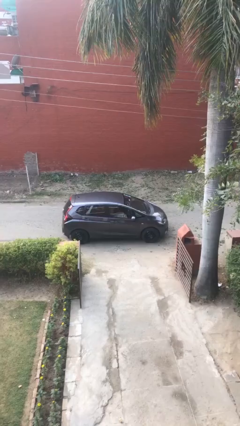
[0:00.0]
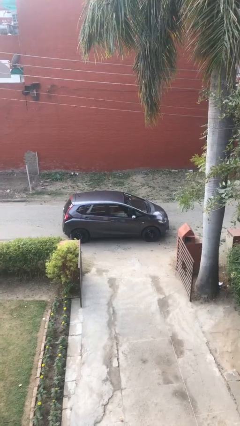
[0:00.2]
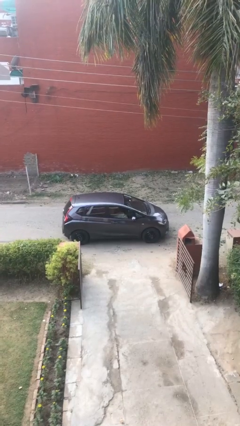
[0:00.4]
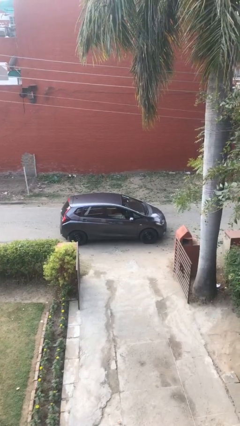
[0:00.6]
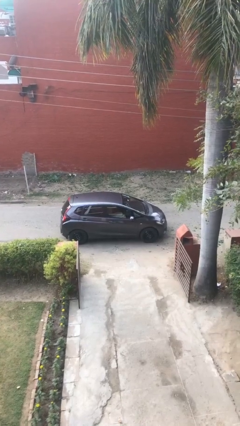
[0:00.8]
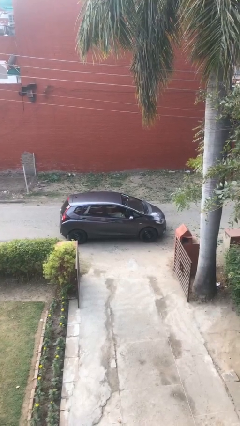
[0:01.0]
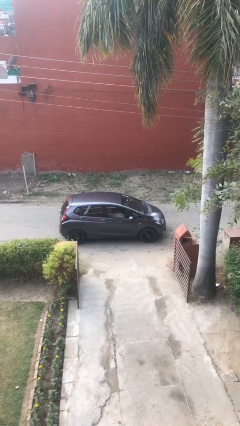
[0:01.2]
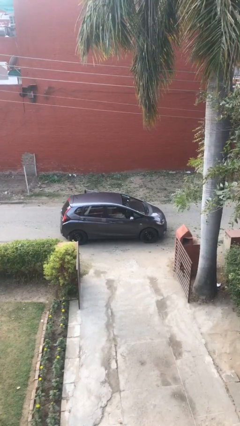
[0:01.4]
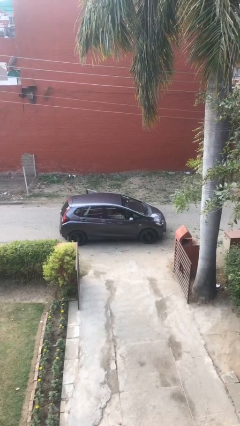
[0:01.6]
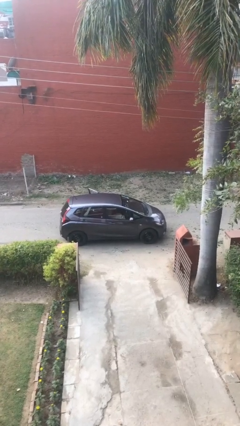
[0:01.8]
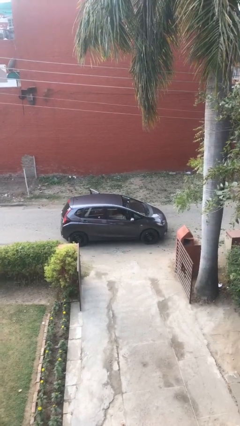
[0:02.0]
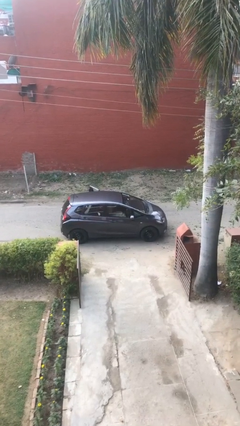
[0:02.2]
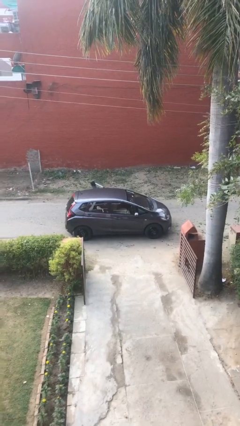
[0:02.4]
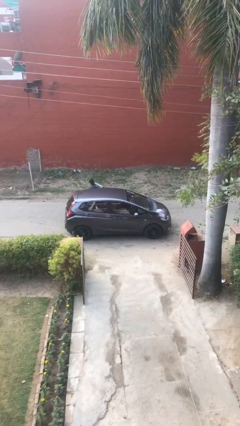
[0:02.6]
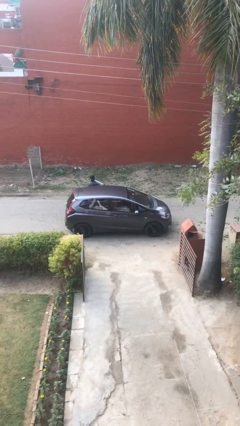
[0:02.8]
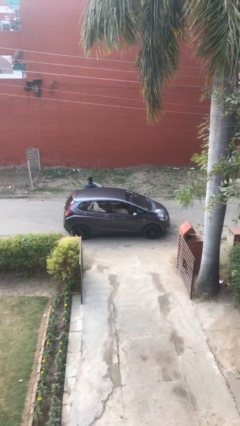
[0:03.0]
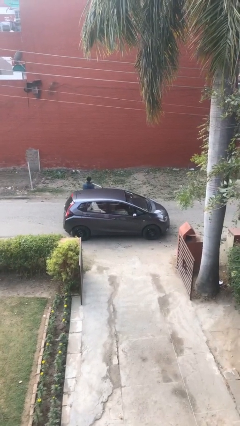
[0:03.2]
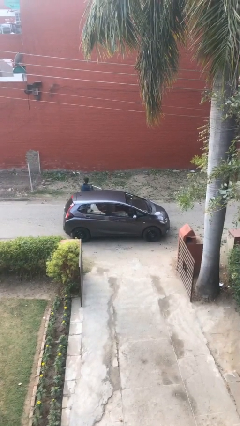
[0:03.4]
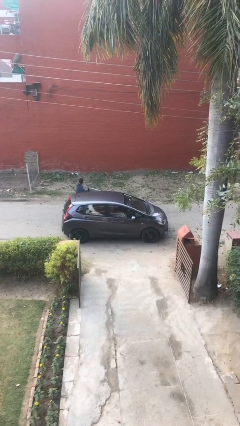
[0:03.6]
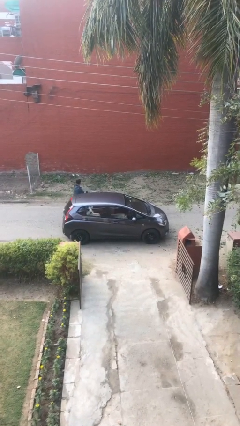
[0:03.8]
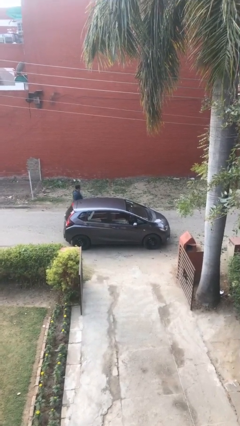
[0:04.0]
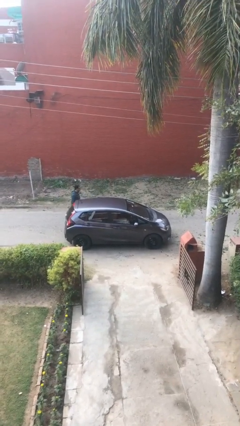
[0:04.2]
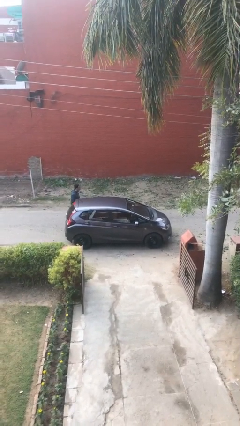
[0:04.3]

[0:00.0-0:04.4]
car drops off person

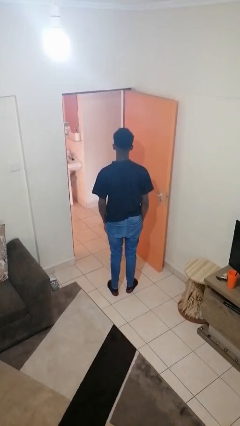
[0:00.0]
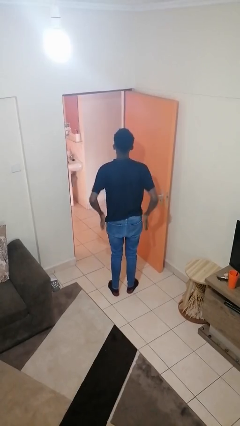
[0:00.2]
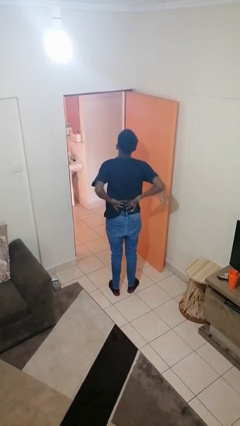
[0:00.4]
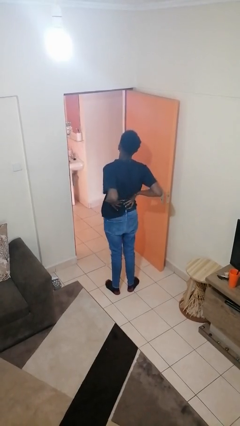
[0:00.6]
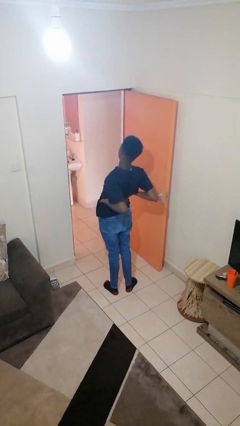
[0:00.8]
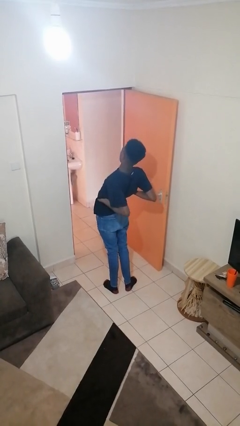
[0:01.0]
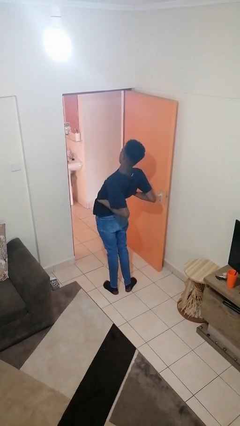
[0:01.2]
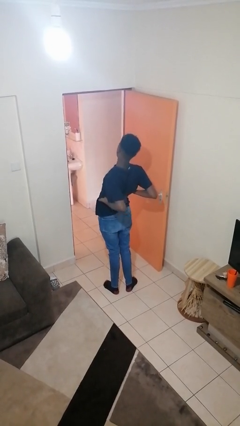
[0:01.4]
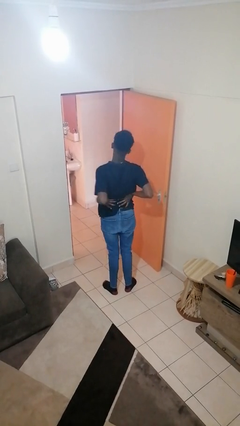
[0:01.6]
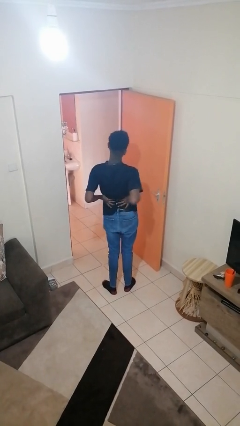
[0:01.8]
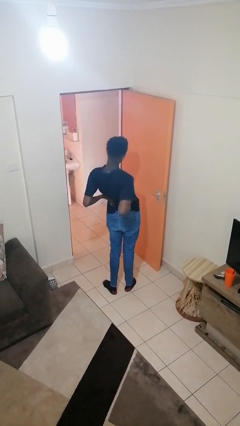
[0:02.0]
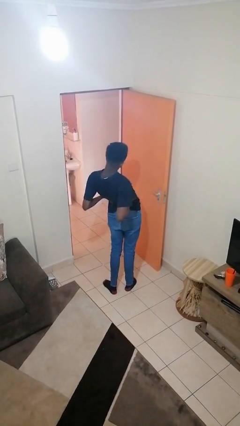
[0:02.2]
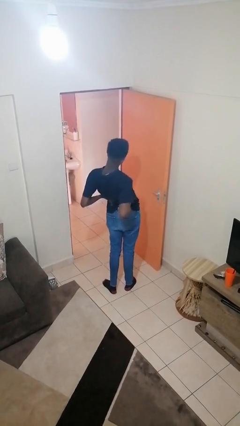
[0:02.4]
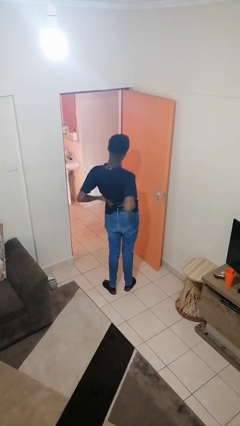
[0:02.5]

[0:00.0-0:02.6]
person stretches back

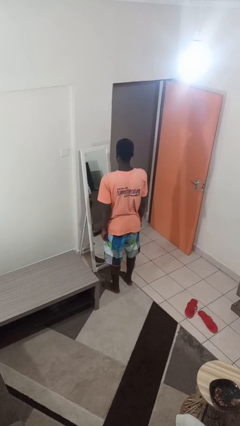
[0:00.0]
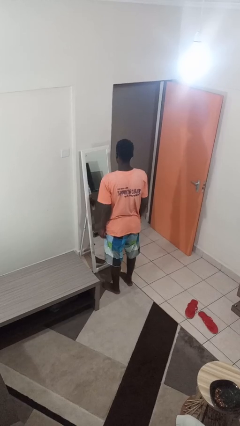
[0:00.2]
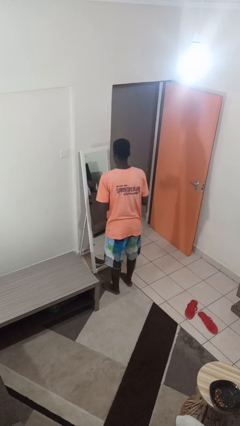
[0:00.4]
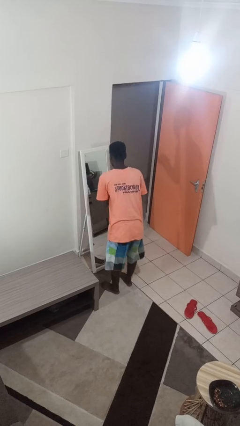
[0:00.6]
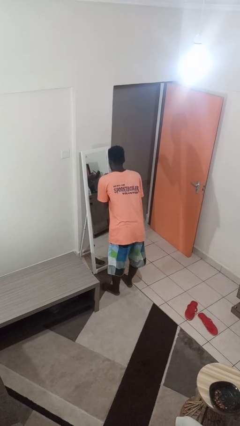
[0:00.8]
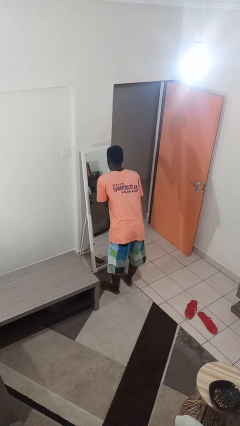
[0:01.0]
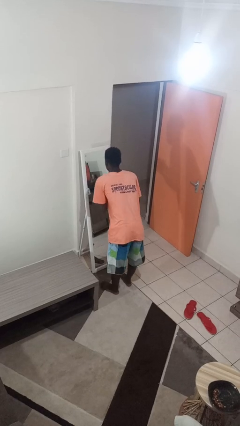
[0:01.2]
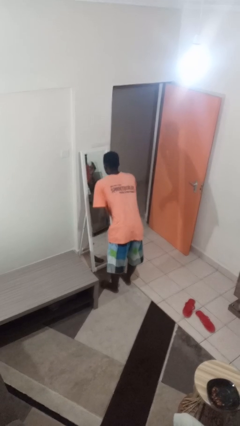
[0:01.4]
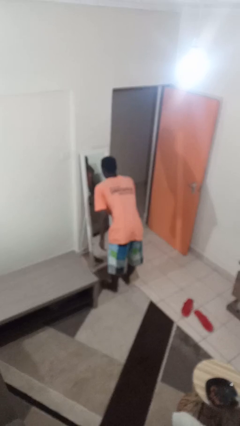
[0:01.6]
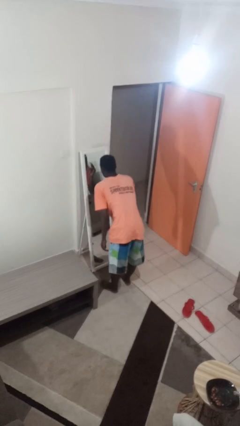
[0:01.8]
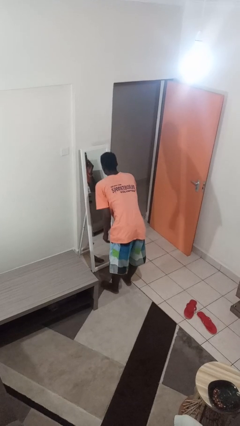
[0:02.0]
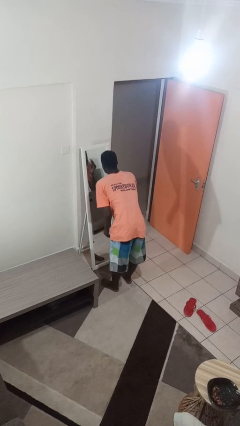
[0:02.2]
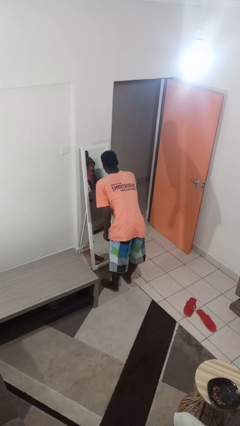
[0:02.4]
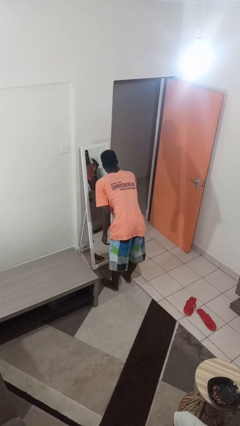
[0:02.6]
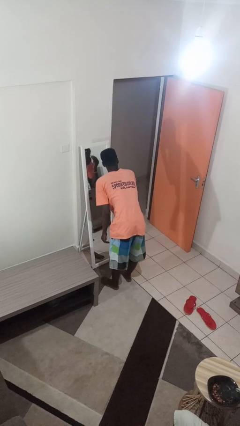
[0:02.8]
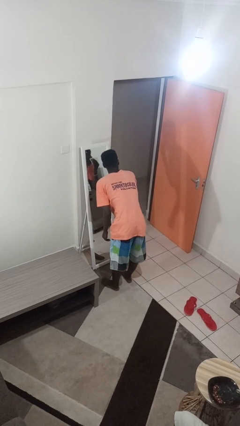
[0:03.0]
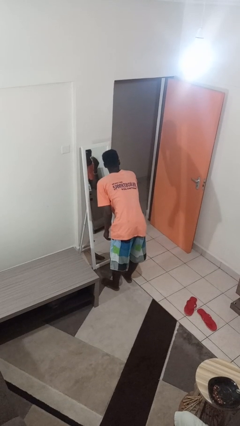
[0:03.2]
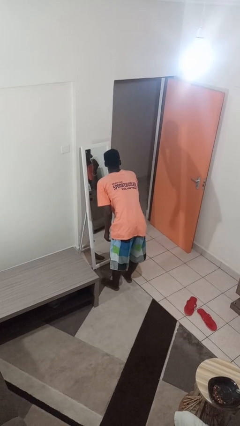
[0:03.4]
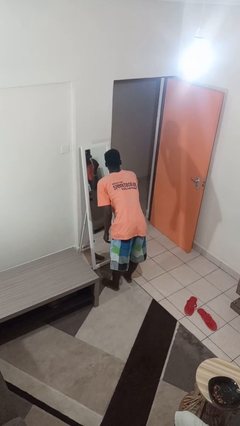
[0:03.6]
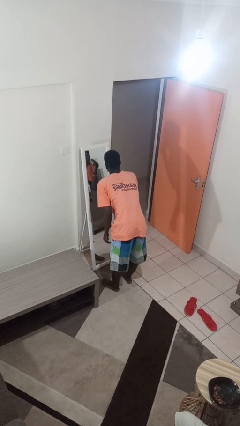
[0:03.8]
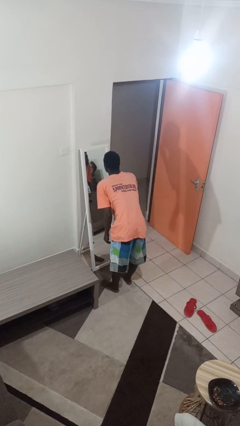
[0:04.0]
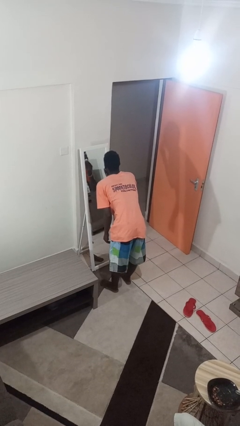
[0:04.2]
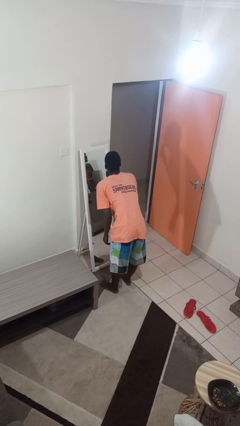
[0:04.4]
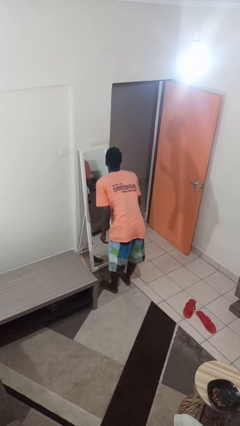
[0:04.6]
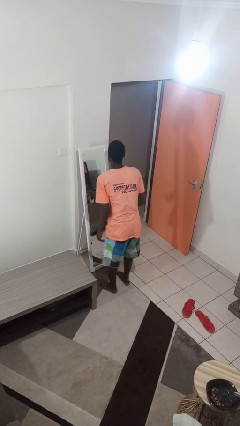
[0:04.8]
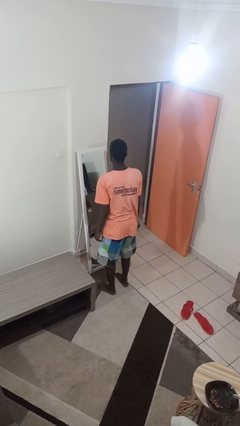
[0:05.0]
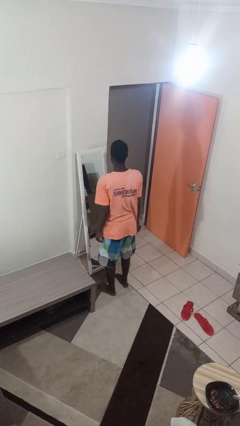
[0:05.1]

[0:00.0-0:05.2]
person applies foundation makeup

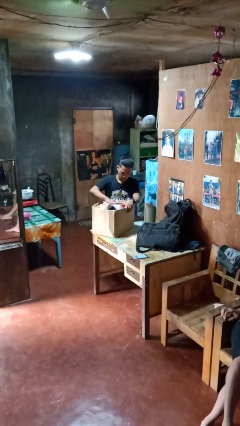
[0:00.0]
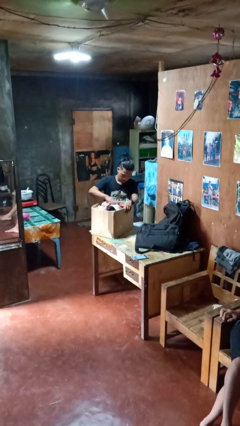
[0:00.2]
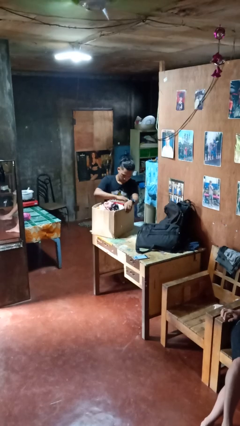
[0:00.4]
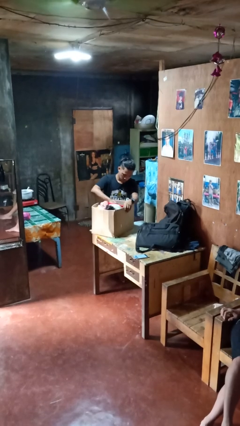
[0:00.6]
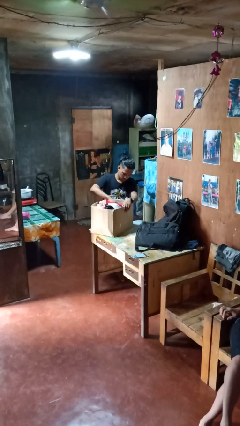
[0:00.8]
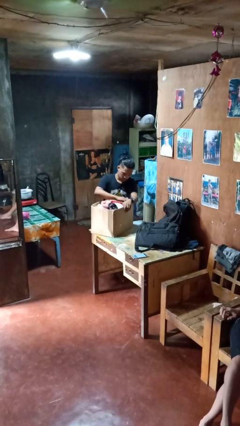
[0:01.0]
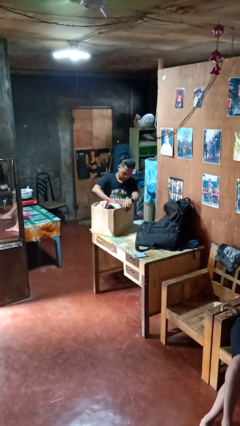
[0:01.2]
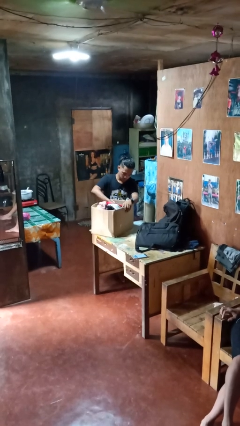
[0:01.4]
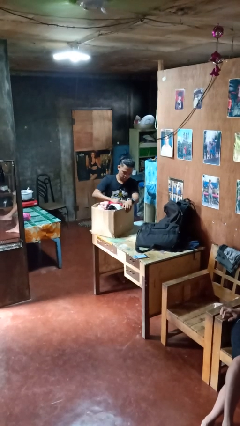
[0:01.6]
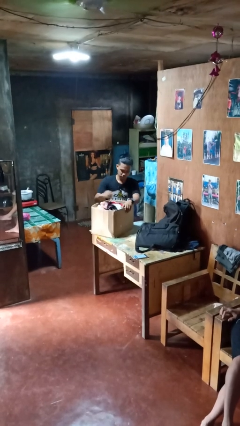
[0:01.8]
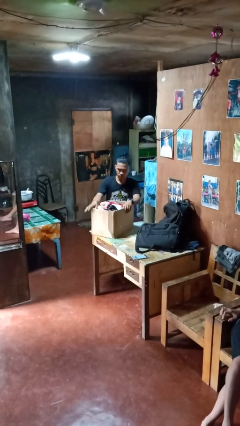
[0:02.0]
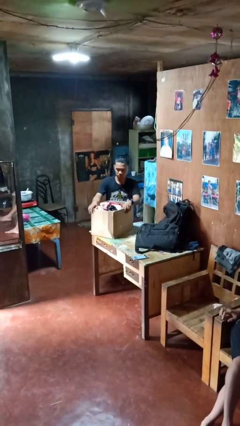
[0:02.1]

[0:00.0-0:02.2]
person searches in box

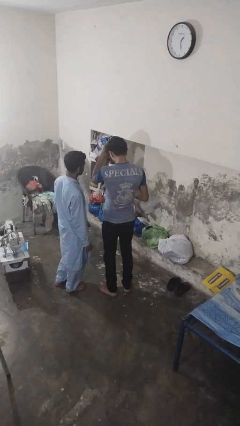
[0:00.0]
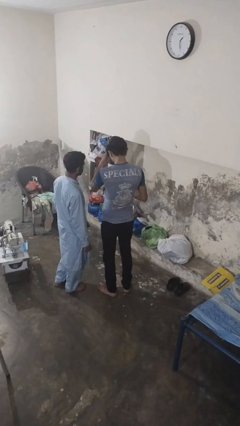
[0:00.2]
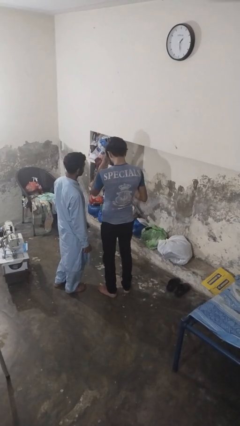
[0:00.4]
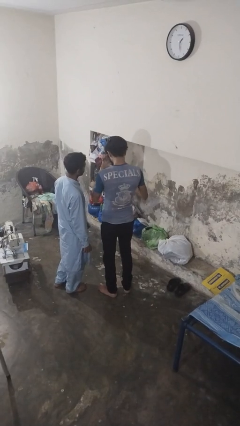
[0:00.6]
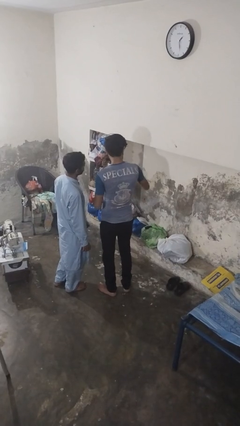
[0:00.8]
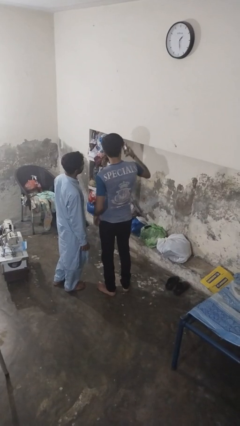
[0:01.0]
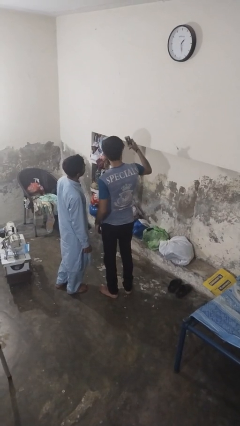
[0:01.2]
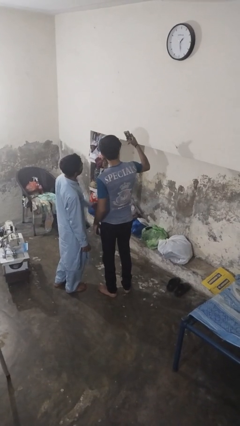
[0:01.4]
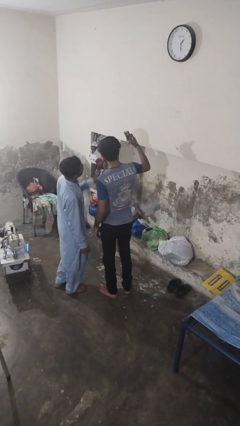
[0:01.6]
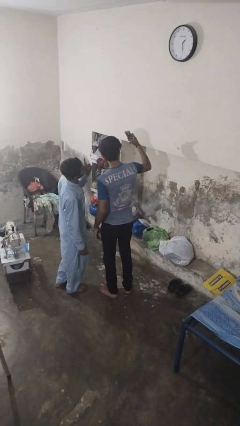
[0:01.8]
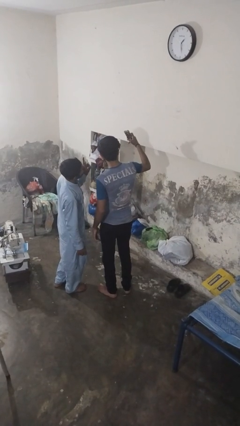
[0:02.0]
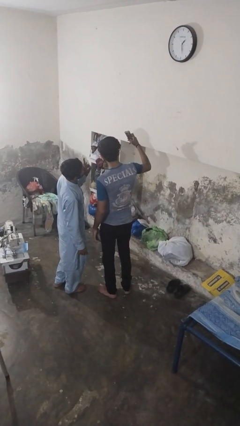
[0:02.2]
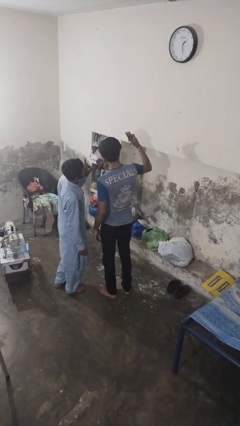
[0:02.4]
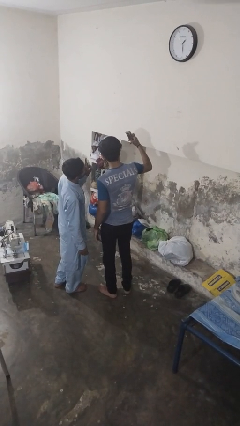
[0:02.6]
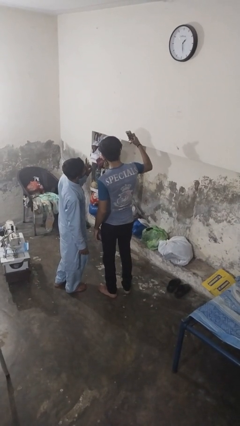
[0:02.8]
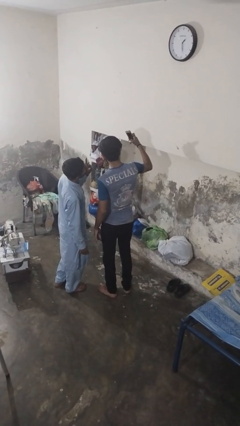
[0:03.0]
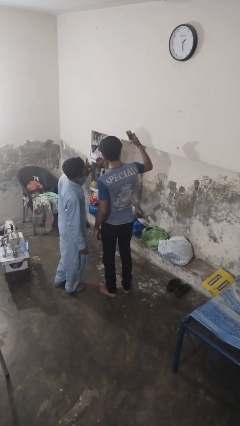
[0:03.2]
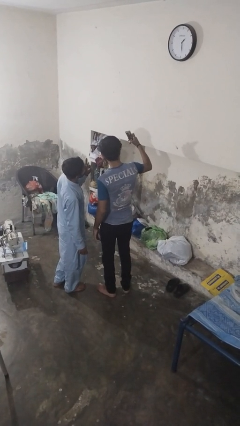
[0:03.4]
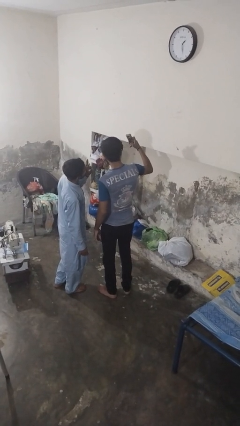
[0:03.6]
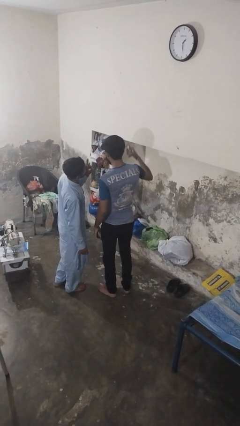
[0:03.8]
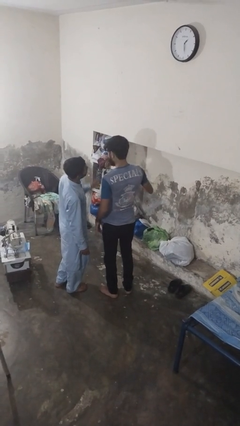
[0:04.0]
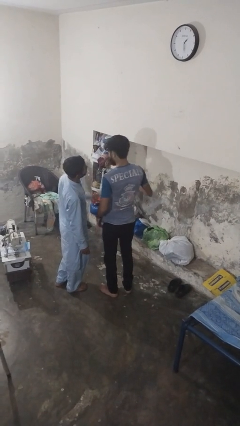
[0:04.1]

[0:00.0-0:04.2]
person takes selfie with person
